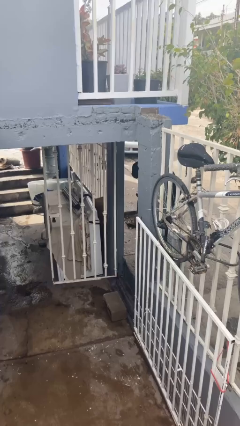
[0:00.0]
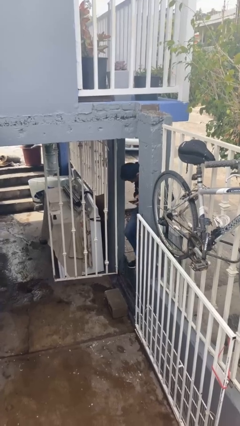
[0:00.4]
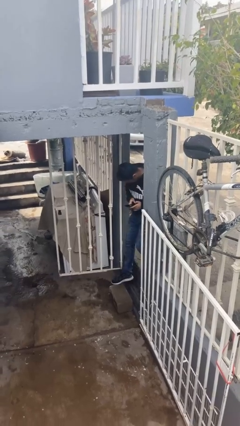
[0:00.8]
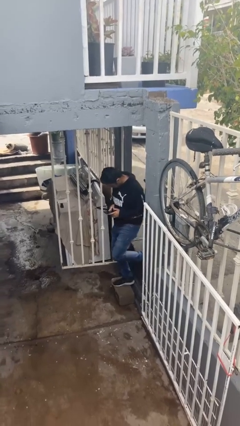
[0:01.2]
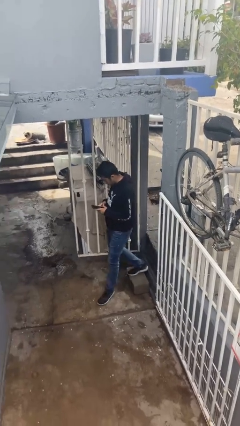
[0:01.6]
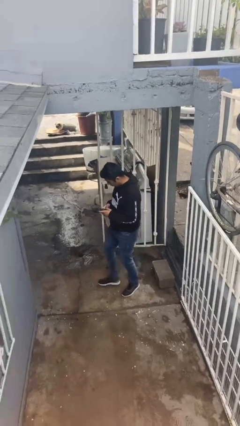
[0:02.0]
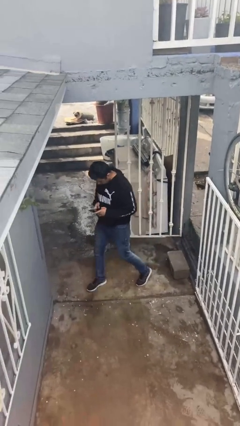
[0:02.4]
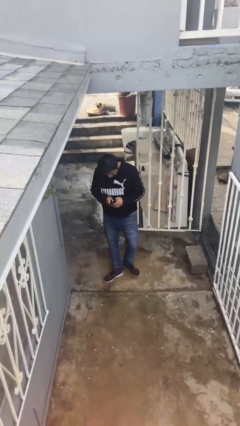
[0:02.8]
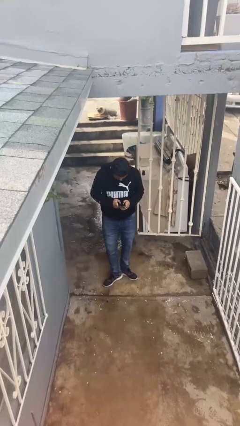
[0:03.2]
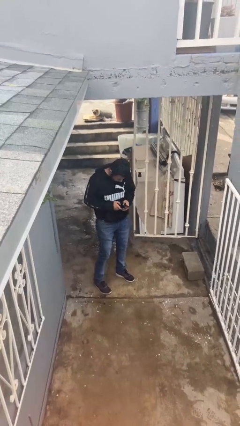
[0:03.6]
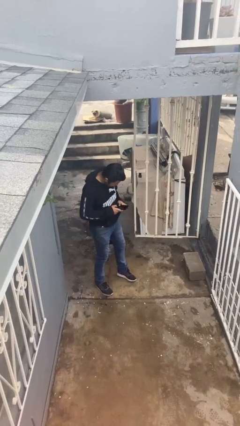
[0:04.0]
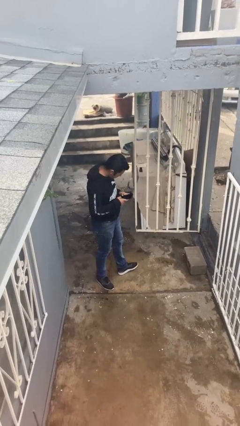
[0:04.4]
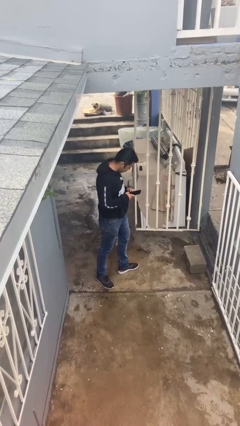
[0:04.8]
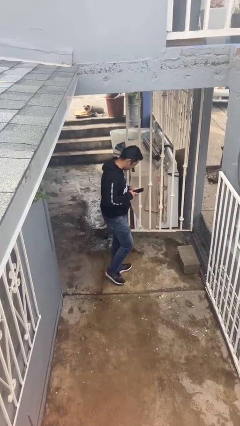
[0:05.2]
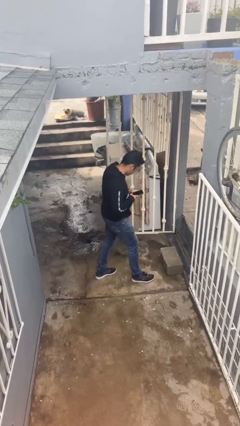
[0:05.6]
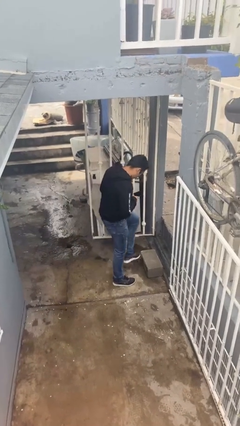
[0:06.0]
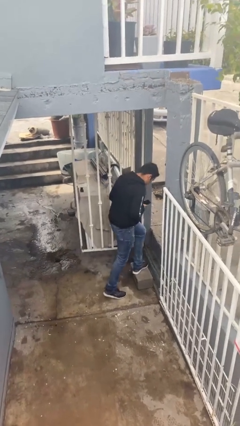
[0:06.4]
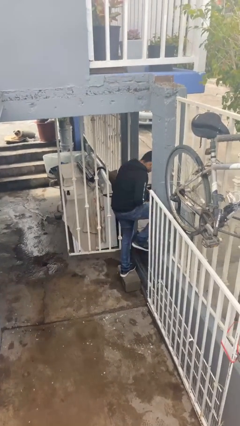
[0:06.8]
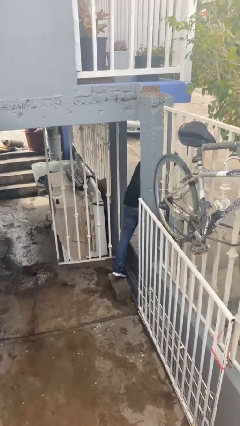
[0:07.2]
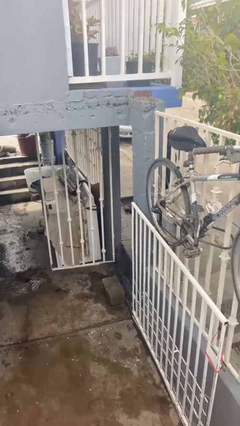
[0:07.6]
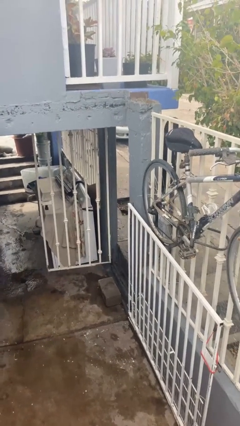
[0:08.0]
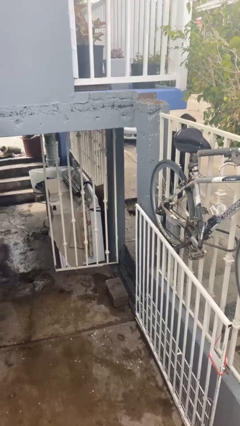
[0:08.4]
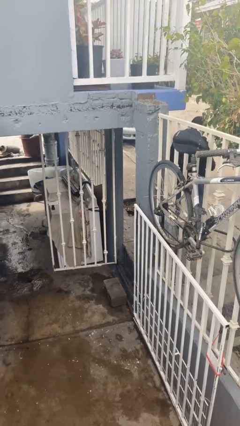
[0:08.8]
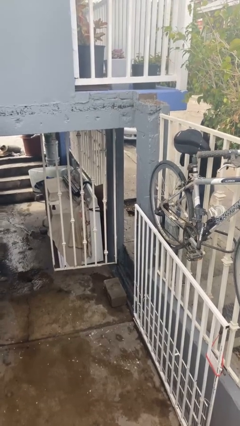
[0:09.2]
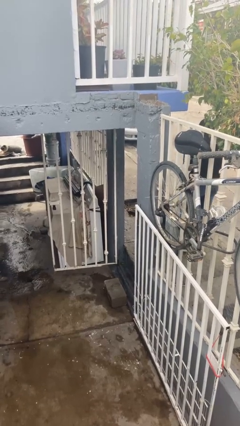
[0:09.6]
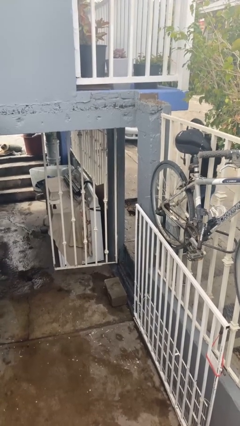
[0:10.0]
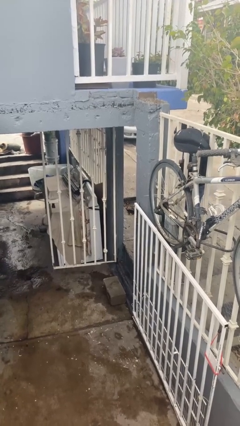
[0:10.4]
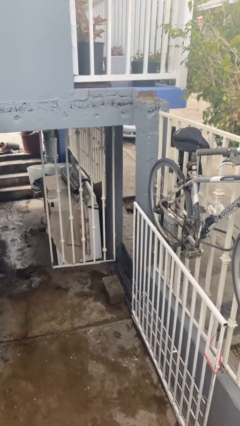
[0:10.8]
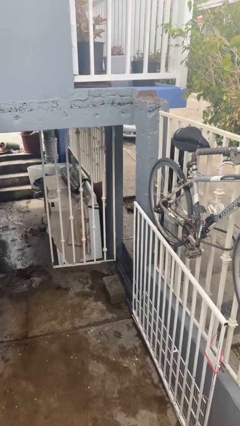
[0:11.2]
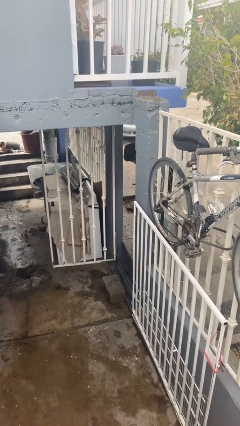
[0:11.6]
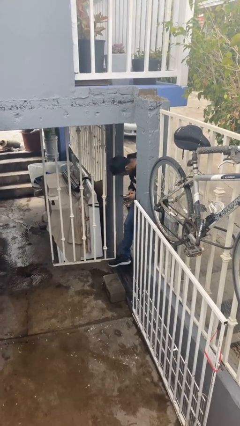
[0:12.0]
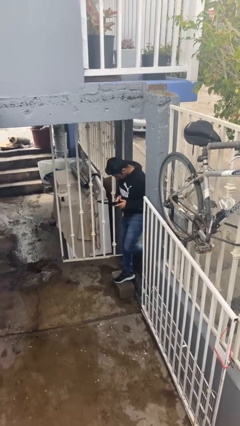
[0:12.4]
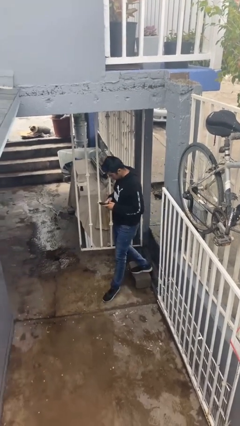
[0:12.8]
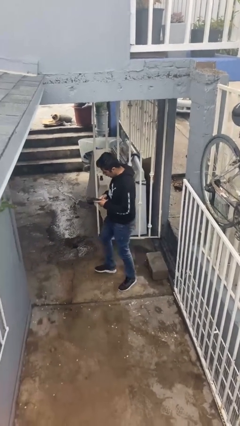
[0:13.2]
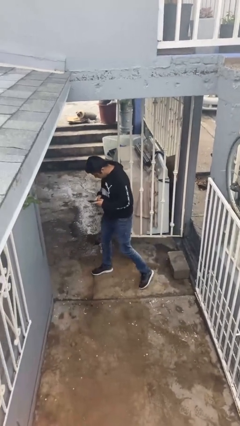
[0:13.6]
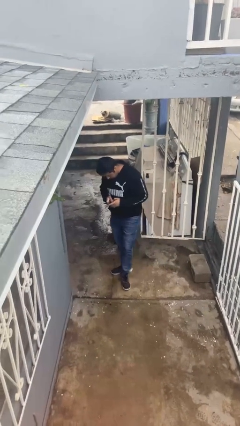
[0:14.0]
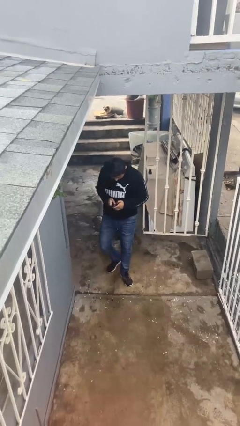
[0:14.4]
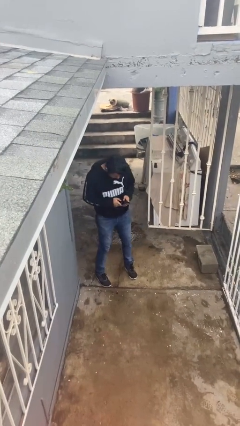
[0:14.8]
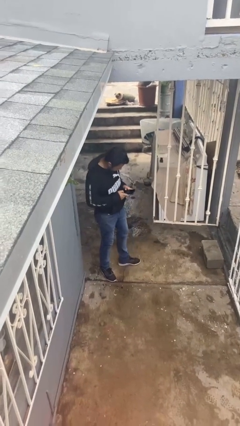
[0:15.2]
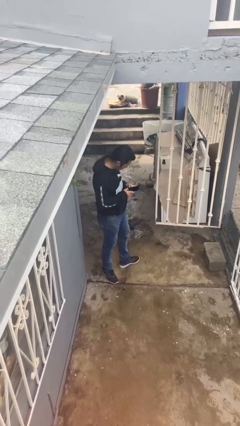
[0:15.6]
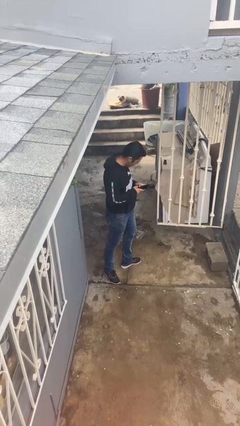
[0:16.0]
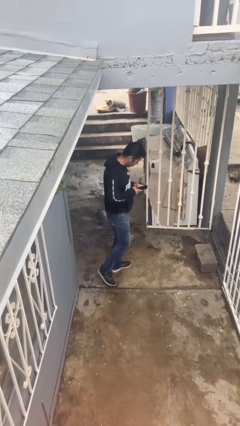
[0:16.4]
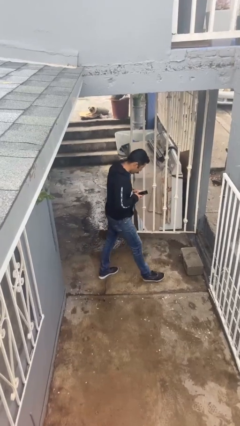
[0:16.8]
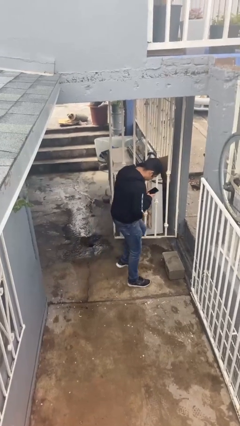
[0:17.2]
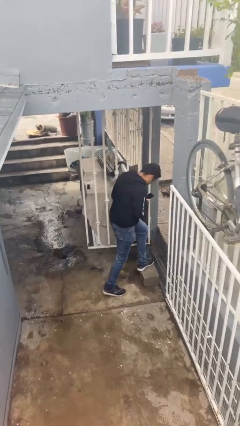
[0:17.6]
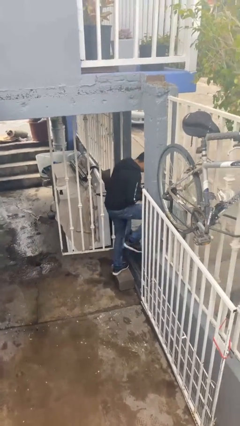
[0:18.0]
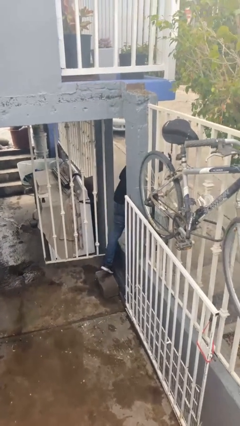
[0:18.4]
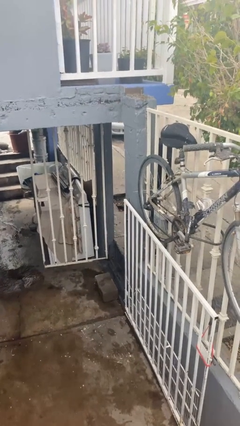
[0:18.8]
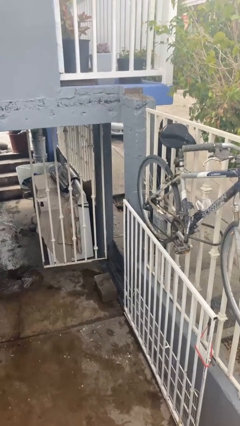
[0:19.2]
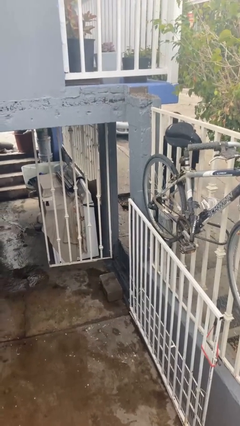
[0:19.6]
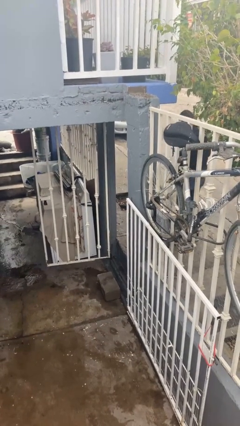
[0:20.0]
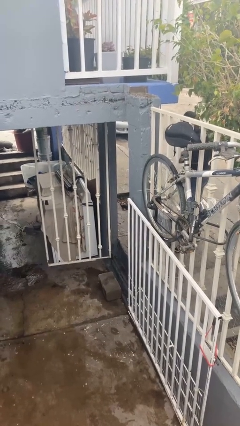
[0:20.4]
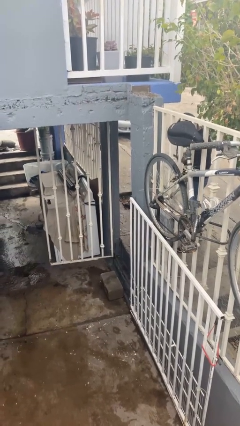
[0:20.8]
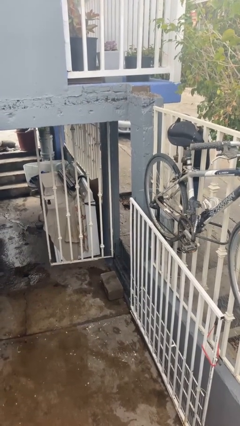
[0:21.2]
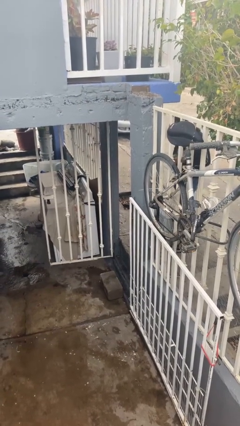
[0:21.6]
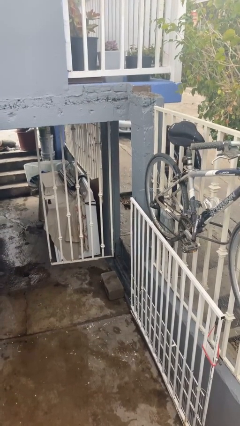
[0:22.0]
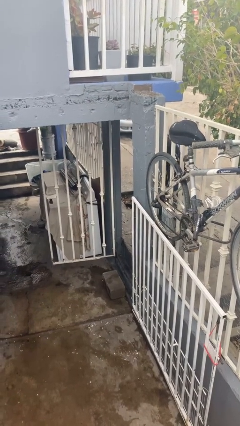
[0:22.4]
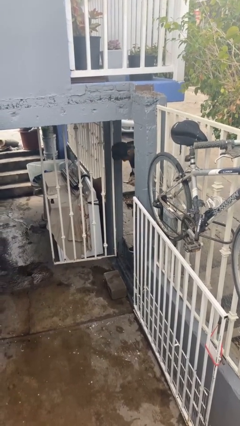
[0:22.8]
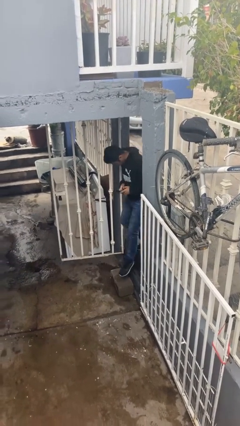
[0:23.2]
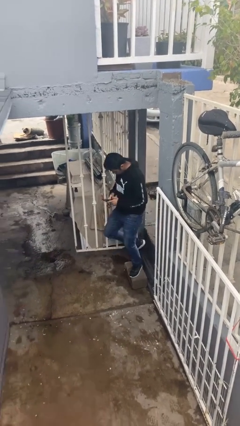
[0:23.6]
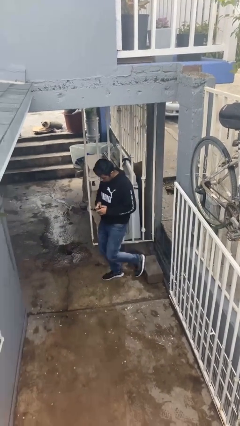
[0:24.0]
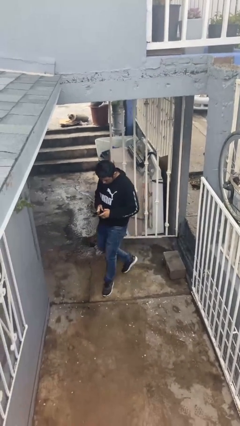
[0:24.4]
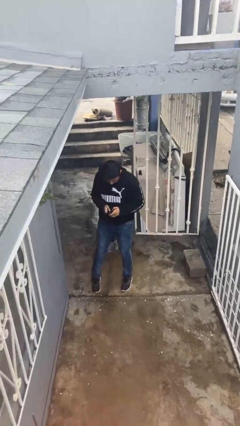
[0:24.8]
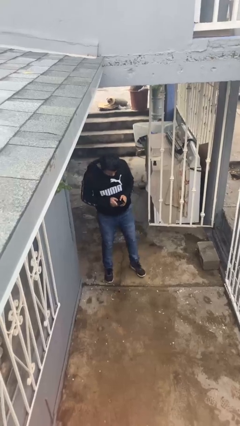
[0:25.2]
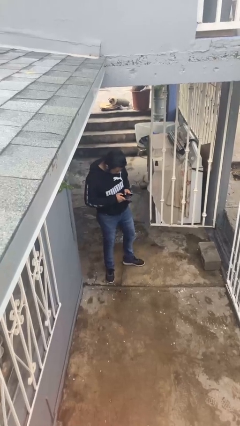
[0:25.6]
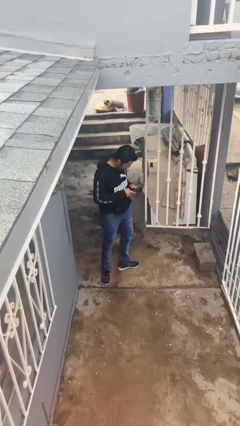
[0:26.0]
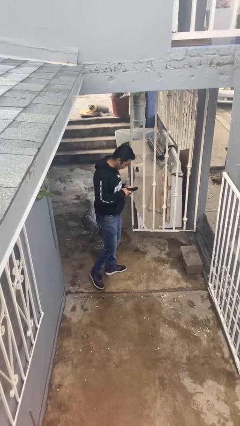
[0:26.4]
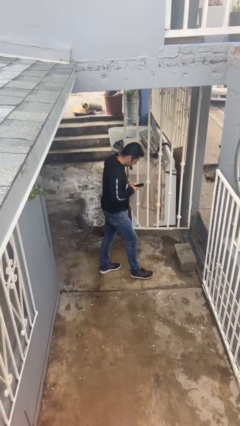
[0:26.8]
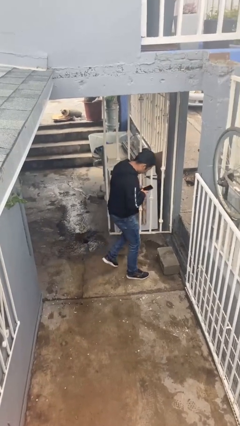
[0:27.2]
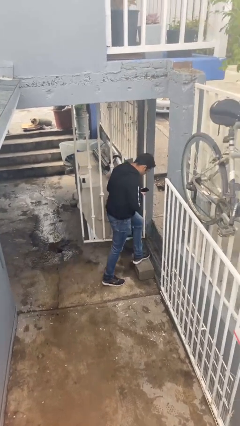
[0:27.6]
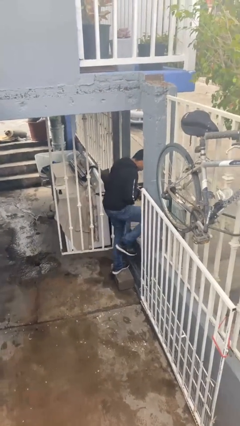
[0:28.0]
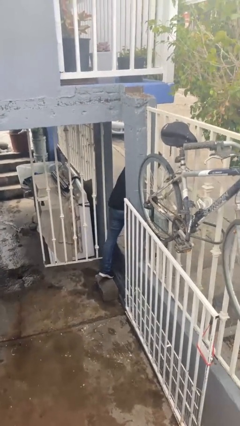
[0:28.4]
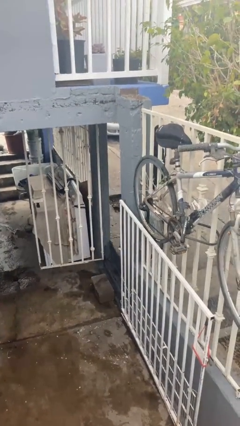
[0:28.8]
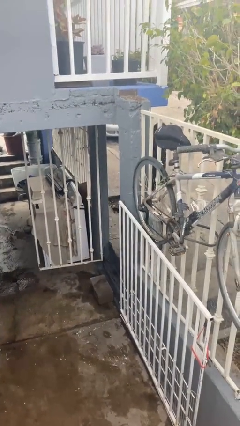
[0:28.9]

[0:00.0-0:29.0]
person texts on phone

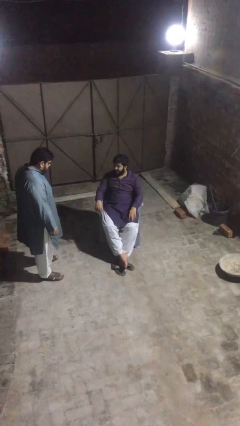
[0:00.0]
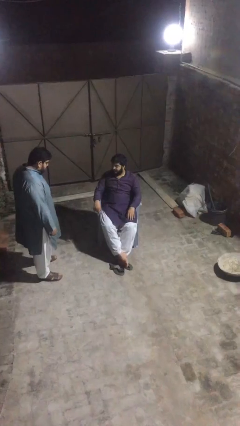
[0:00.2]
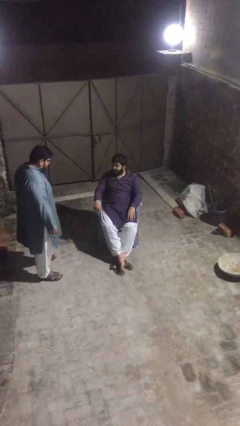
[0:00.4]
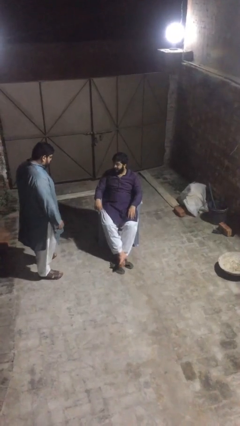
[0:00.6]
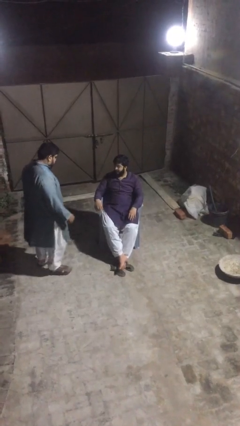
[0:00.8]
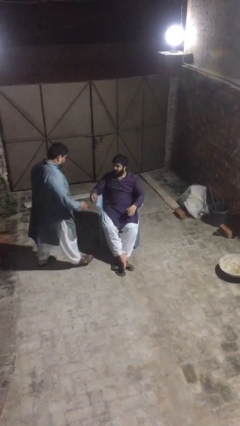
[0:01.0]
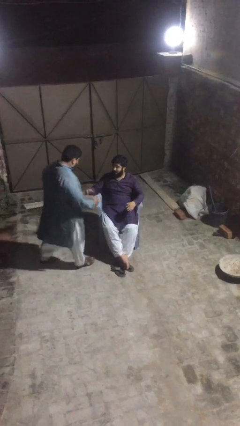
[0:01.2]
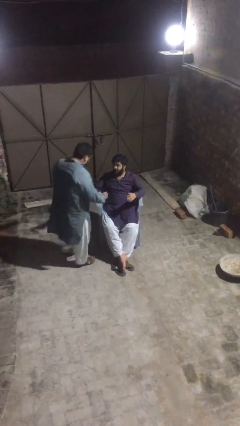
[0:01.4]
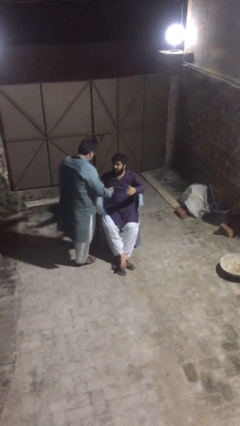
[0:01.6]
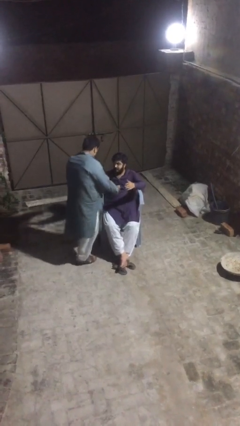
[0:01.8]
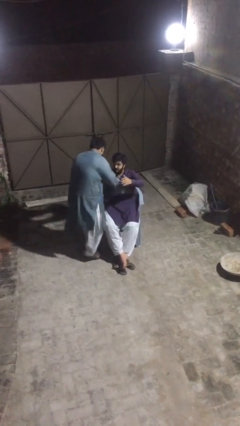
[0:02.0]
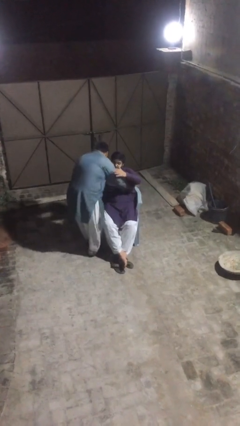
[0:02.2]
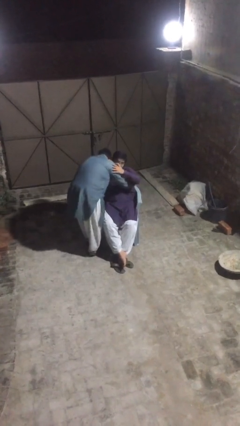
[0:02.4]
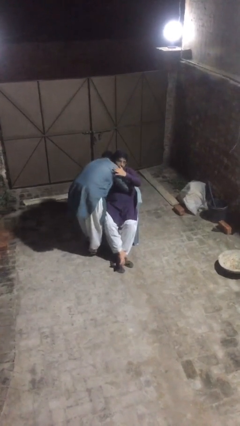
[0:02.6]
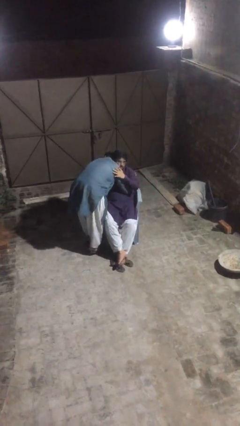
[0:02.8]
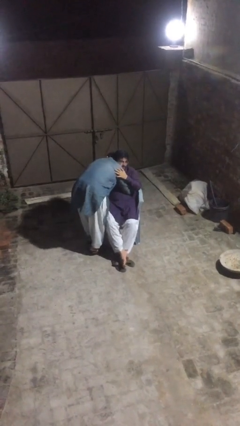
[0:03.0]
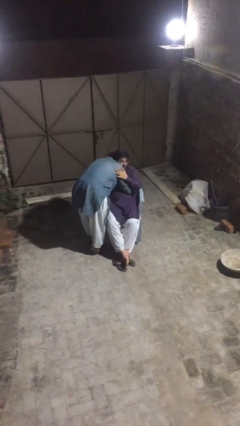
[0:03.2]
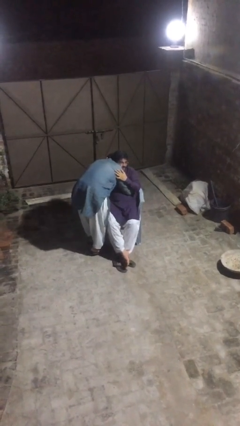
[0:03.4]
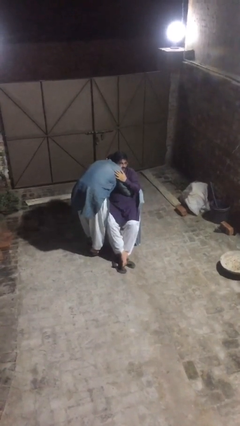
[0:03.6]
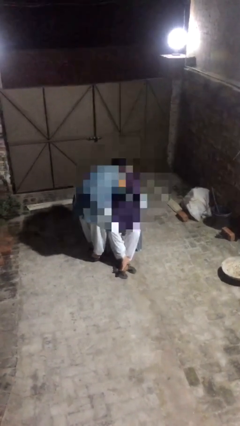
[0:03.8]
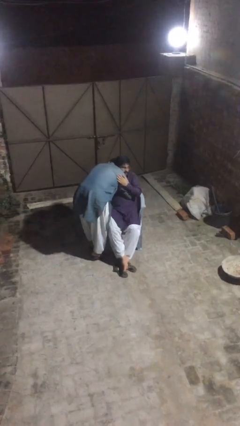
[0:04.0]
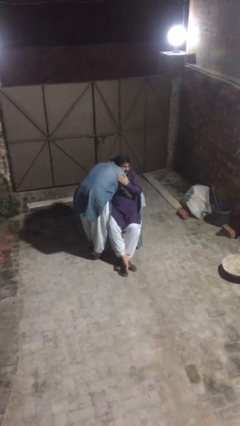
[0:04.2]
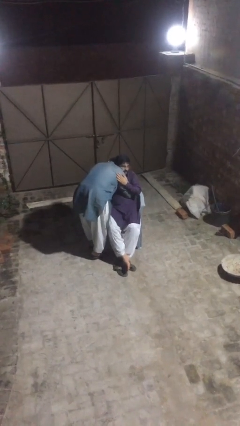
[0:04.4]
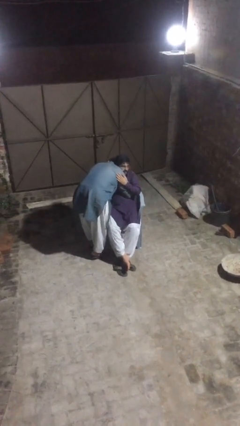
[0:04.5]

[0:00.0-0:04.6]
person embraces person
